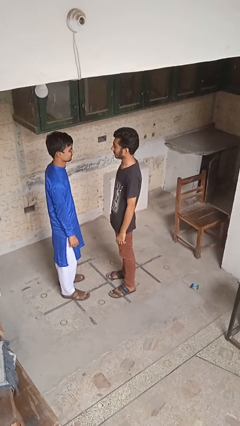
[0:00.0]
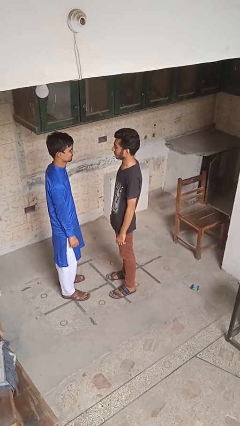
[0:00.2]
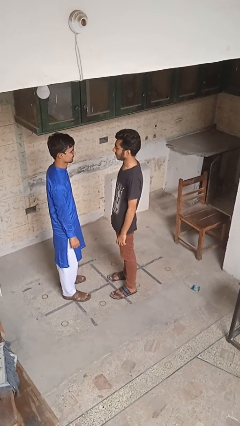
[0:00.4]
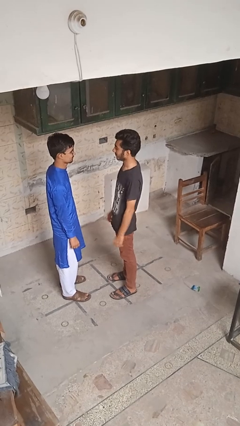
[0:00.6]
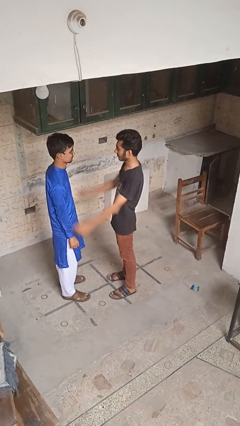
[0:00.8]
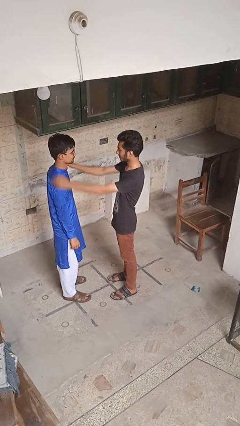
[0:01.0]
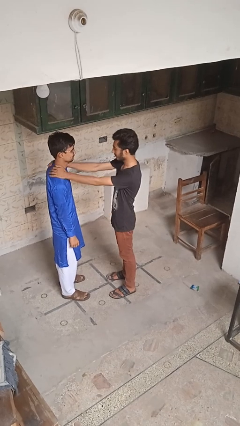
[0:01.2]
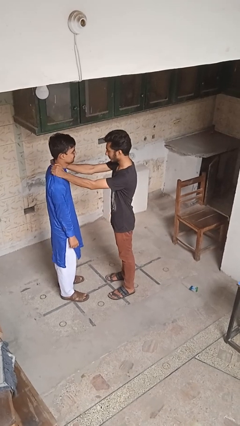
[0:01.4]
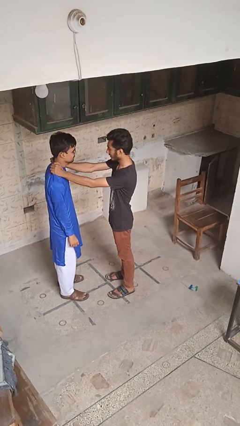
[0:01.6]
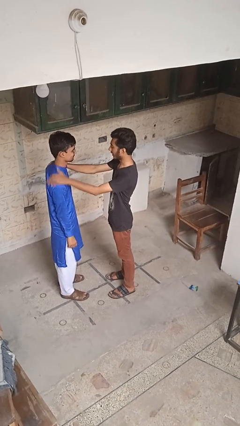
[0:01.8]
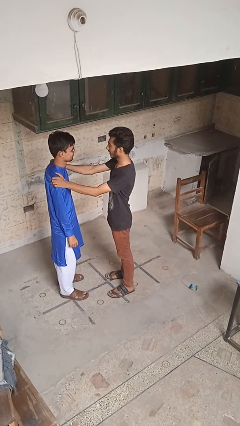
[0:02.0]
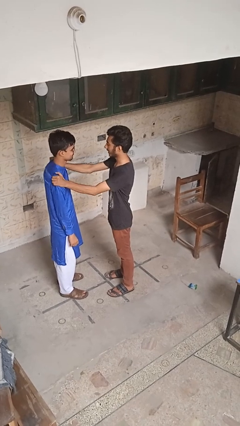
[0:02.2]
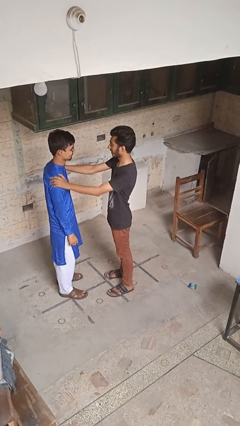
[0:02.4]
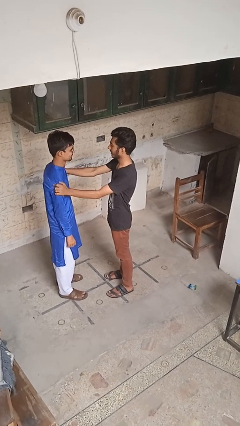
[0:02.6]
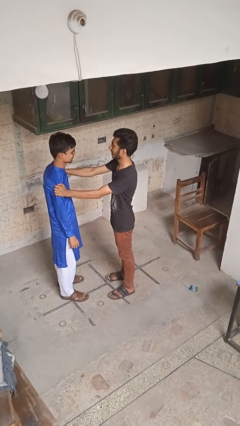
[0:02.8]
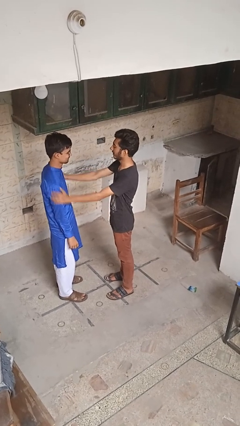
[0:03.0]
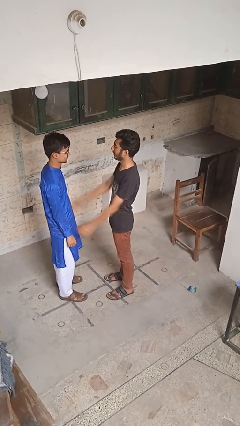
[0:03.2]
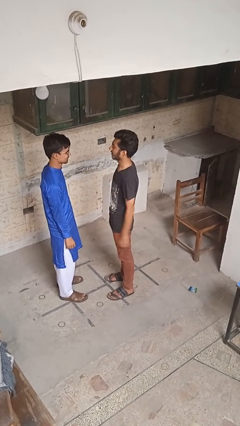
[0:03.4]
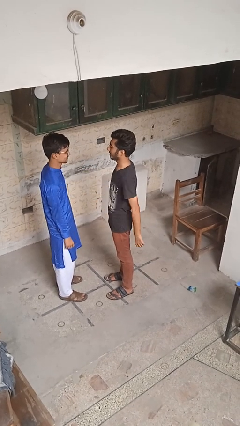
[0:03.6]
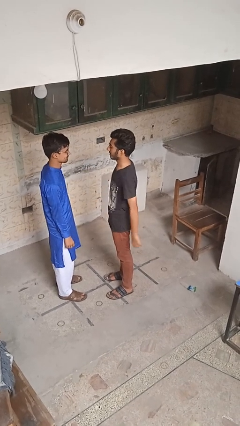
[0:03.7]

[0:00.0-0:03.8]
person pounds shoulders of person

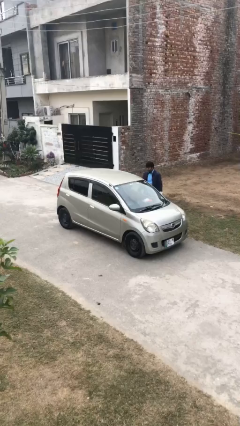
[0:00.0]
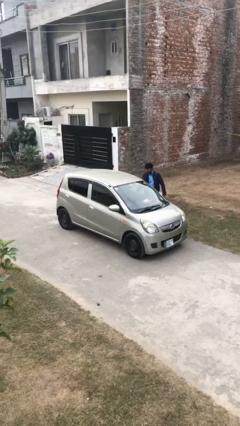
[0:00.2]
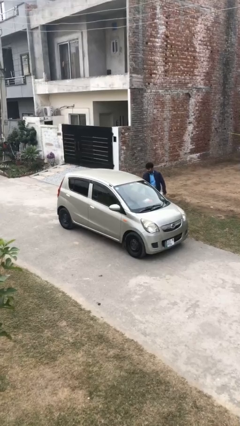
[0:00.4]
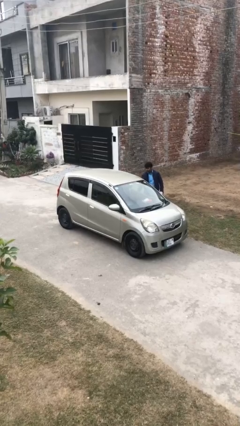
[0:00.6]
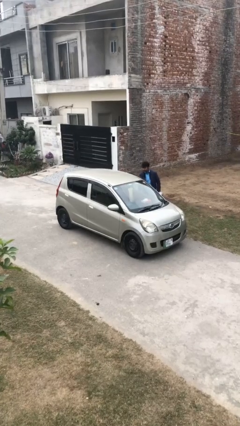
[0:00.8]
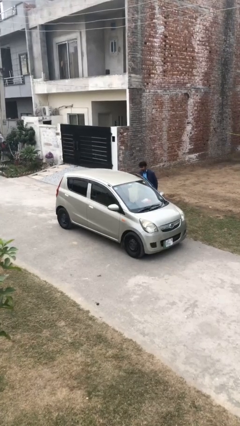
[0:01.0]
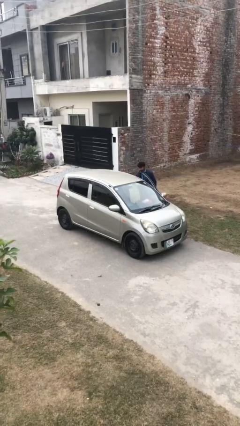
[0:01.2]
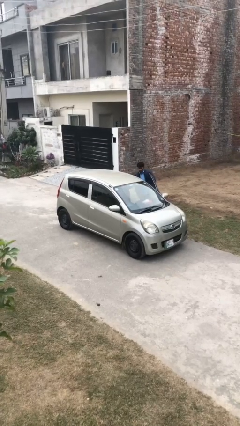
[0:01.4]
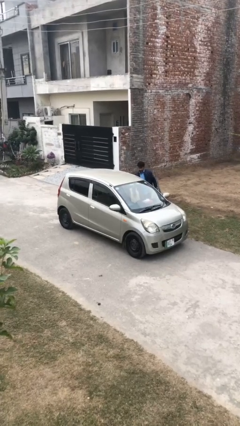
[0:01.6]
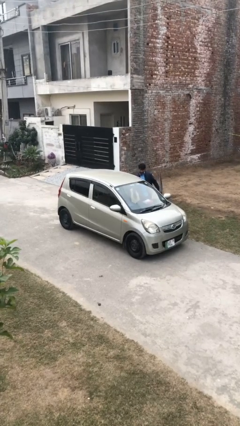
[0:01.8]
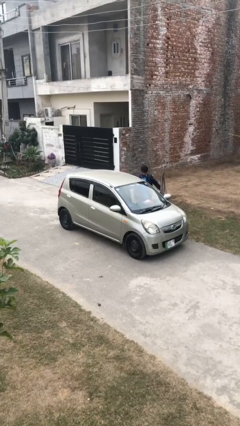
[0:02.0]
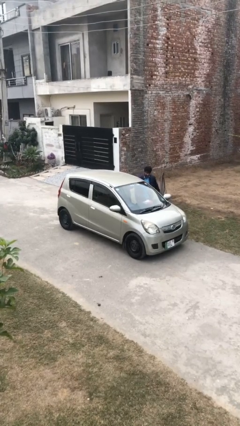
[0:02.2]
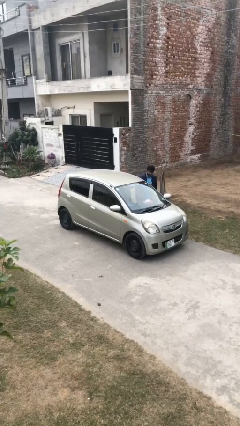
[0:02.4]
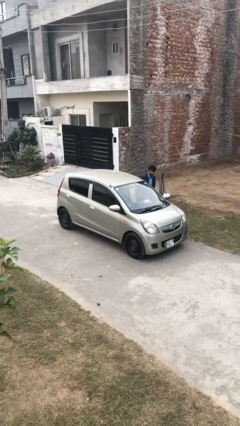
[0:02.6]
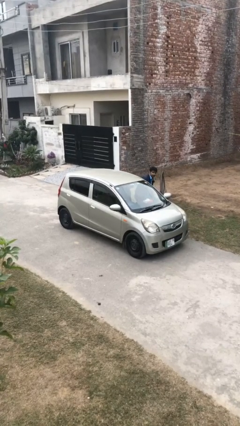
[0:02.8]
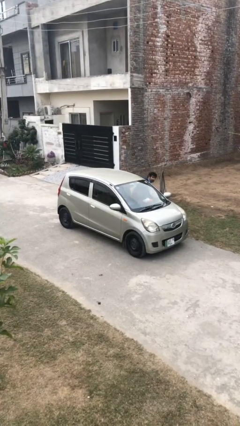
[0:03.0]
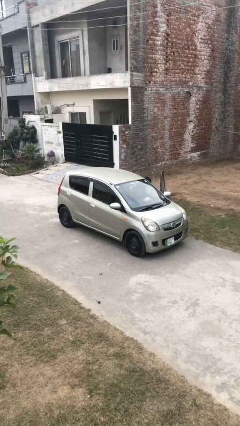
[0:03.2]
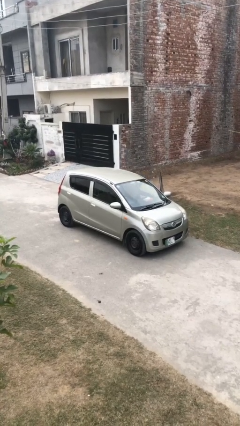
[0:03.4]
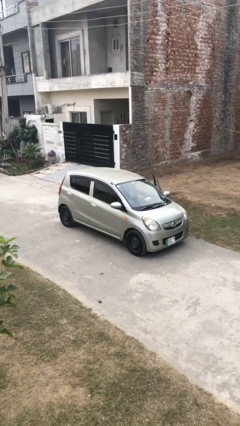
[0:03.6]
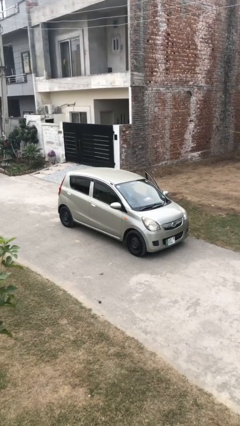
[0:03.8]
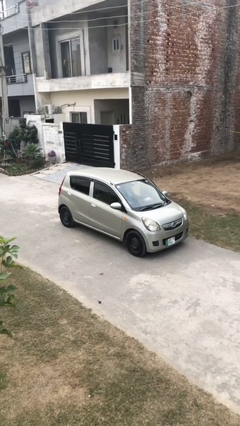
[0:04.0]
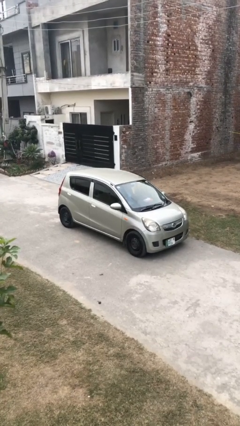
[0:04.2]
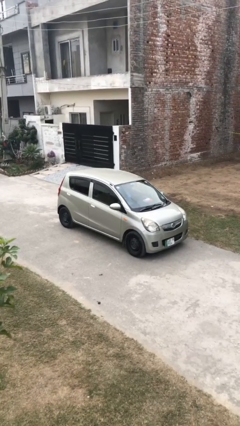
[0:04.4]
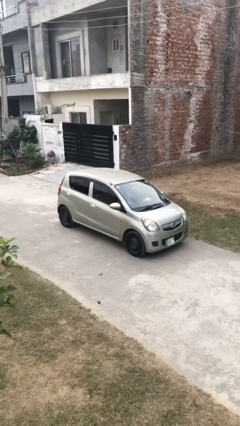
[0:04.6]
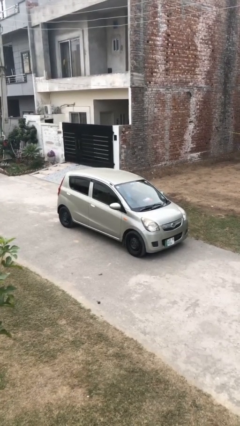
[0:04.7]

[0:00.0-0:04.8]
car picks up person

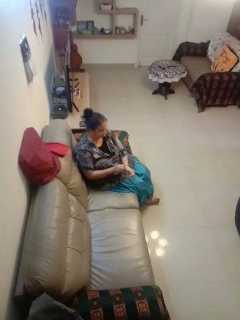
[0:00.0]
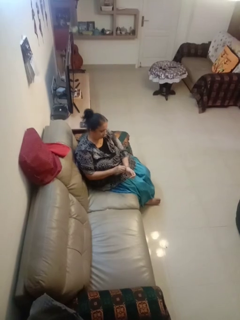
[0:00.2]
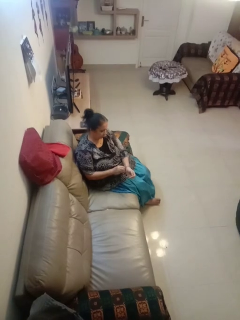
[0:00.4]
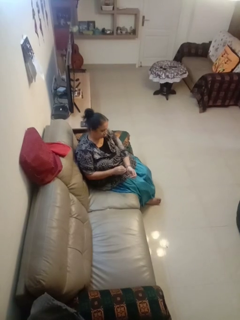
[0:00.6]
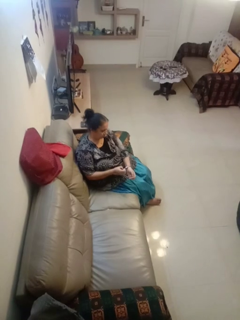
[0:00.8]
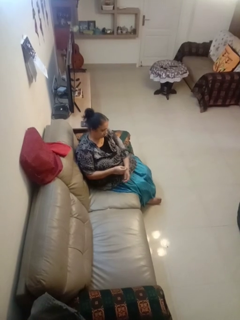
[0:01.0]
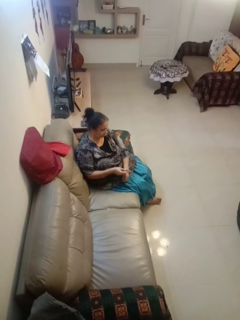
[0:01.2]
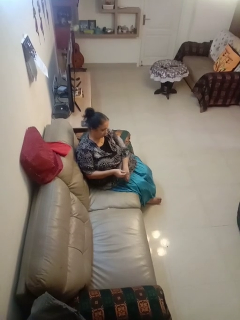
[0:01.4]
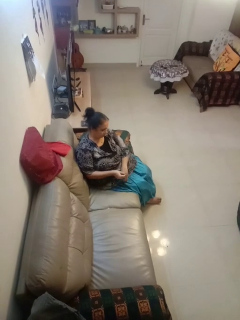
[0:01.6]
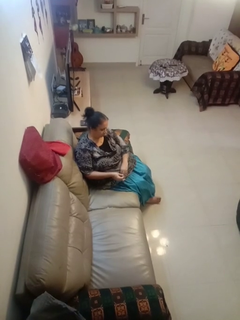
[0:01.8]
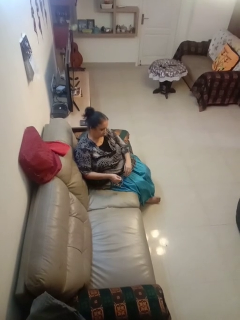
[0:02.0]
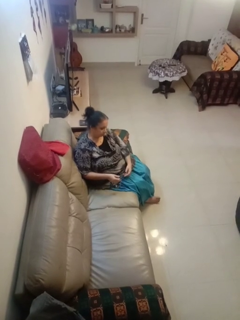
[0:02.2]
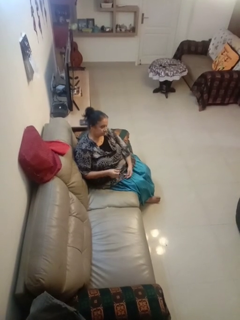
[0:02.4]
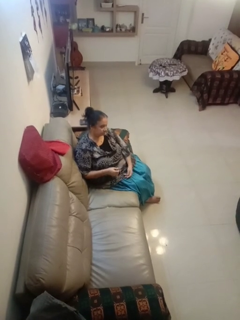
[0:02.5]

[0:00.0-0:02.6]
person takes off wristwatch

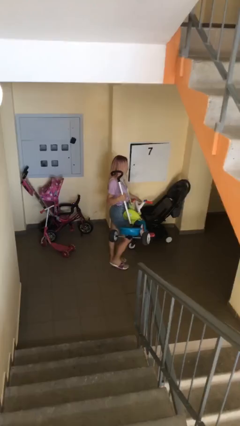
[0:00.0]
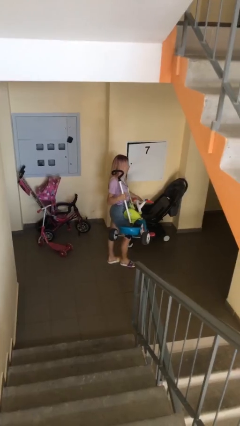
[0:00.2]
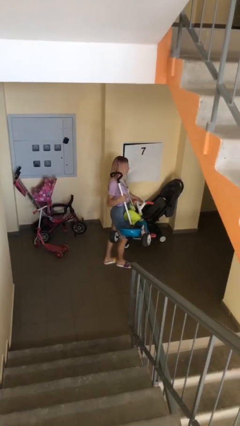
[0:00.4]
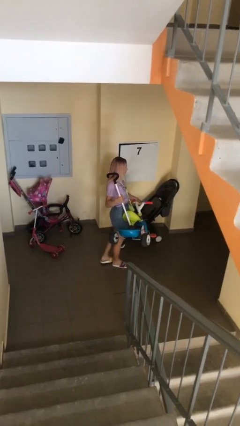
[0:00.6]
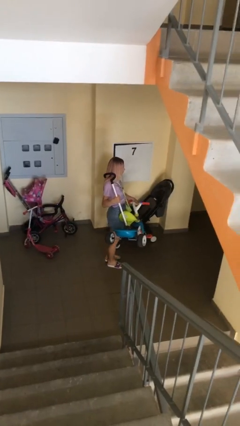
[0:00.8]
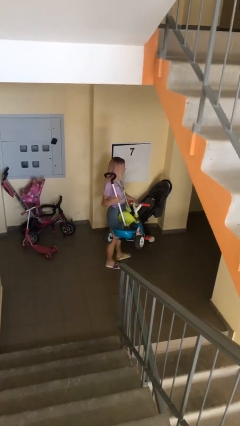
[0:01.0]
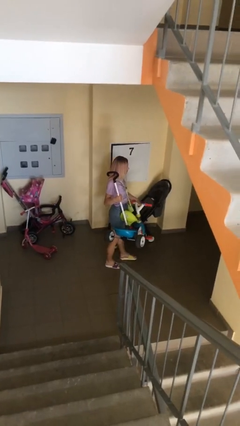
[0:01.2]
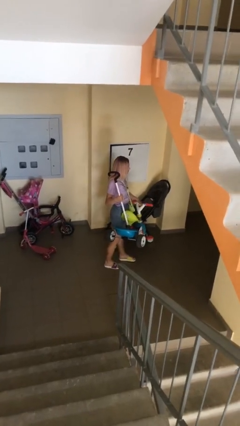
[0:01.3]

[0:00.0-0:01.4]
person carries bicycle

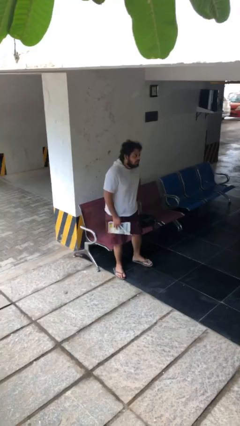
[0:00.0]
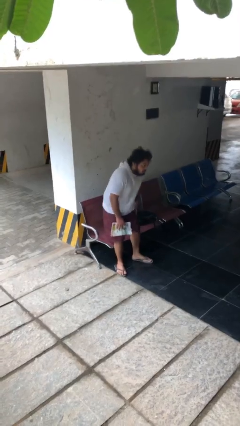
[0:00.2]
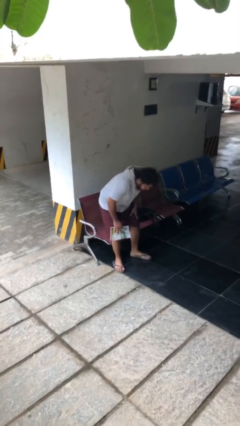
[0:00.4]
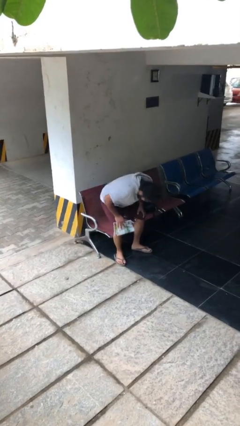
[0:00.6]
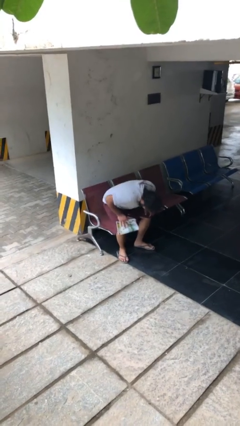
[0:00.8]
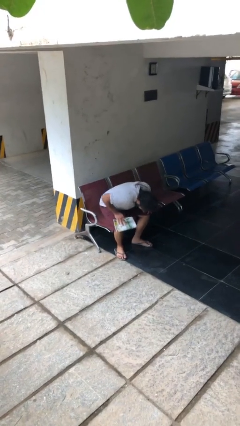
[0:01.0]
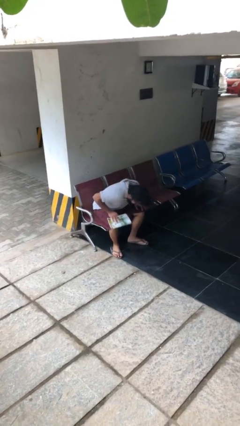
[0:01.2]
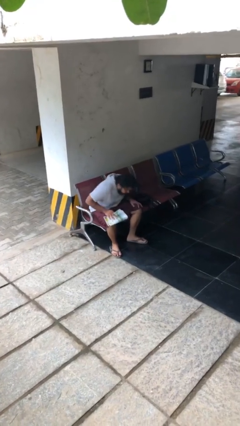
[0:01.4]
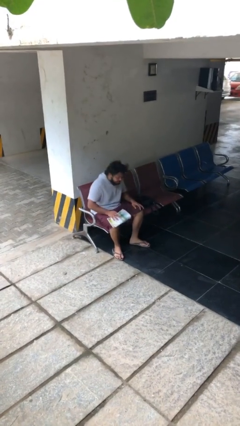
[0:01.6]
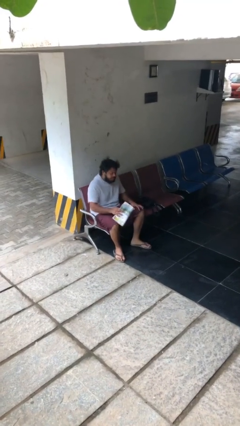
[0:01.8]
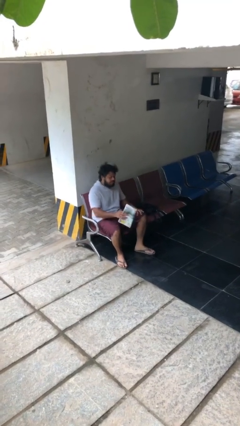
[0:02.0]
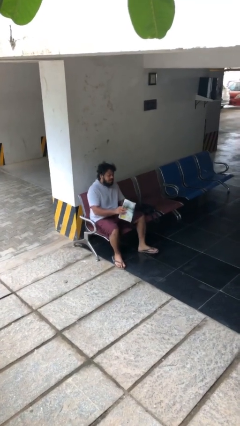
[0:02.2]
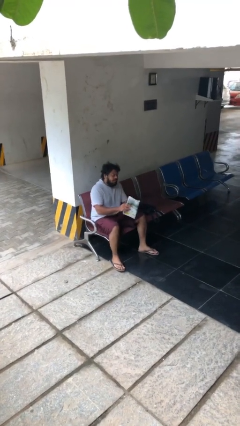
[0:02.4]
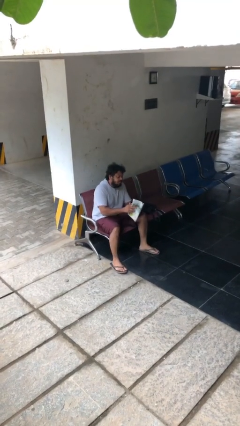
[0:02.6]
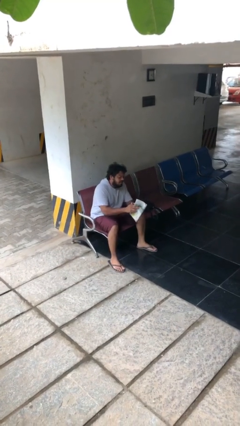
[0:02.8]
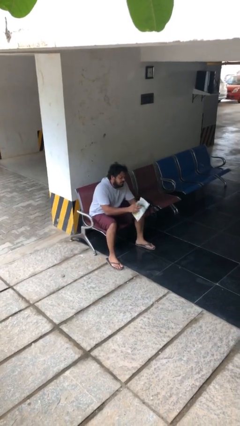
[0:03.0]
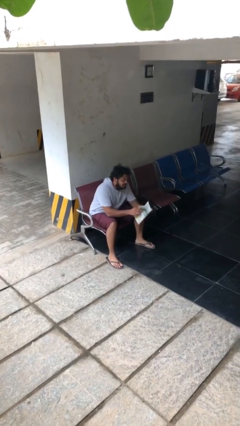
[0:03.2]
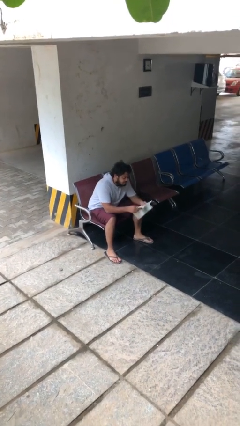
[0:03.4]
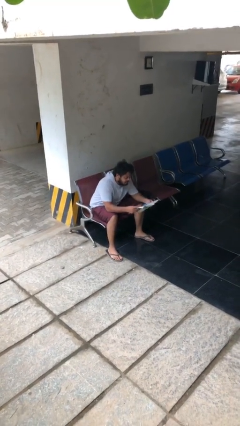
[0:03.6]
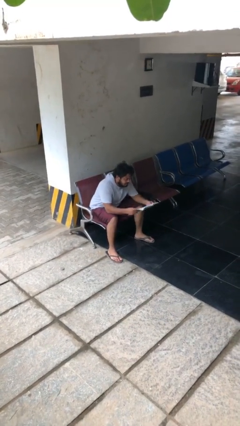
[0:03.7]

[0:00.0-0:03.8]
person sits down

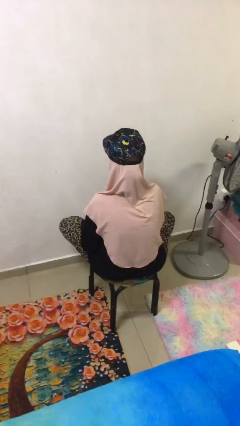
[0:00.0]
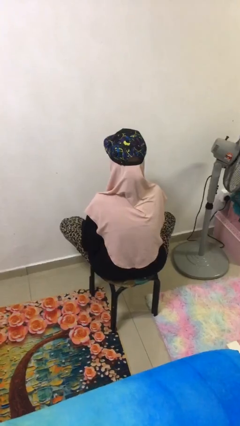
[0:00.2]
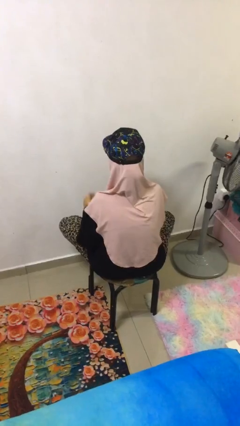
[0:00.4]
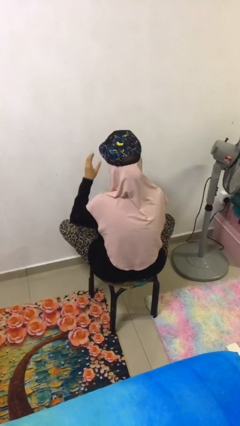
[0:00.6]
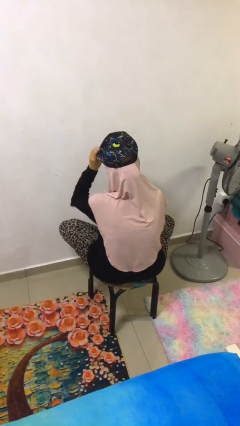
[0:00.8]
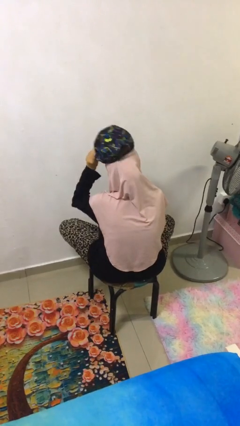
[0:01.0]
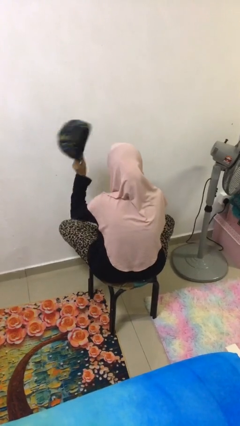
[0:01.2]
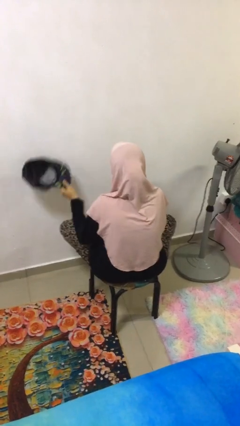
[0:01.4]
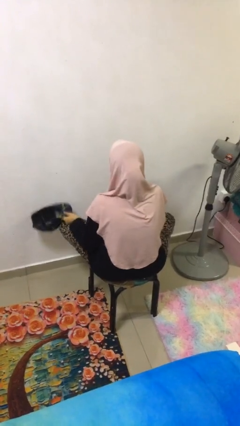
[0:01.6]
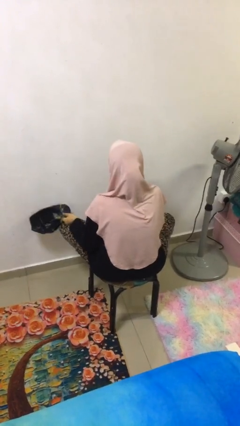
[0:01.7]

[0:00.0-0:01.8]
person takes off hat
